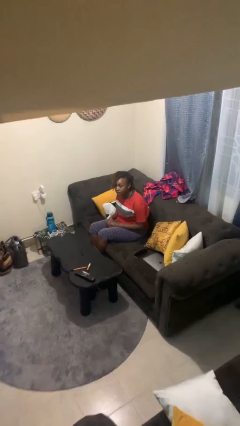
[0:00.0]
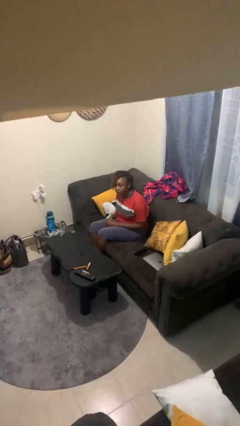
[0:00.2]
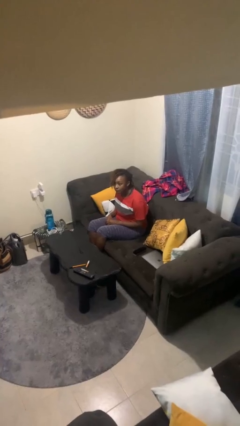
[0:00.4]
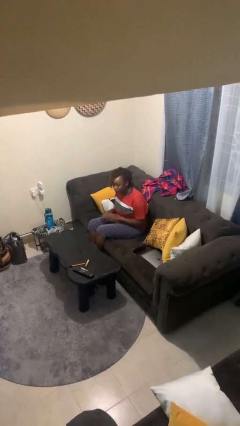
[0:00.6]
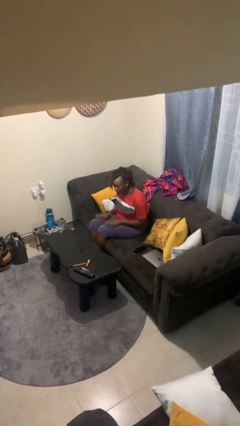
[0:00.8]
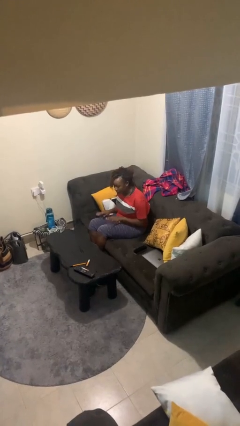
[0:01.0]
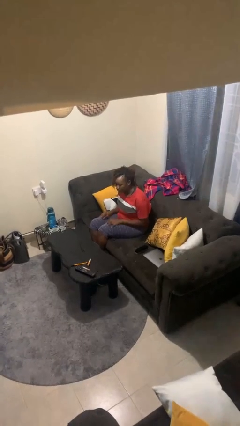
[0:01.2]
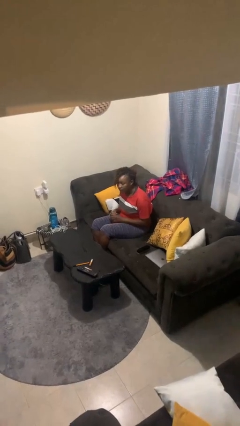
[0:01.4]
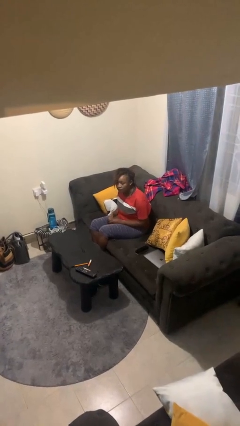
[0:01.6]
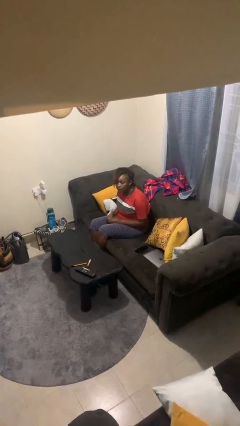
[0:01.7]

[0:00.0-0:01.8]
person slaps hands on thighs

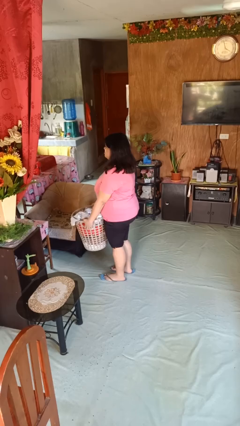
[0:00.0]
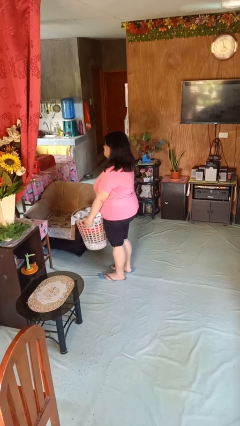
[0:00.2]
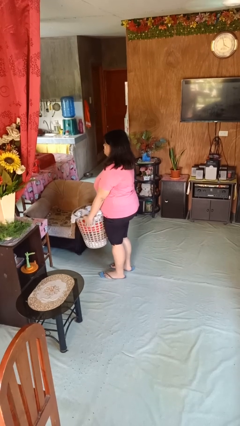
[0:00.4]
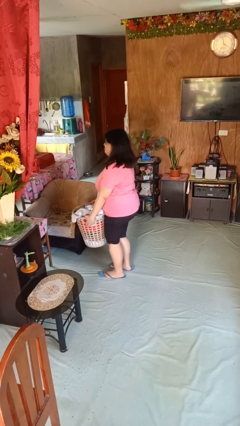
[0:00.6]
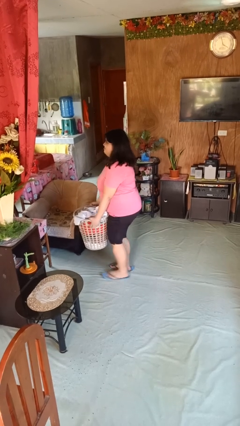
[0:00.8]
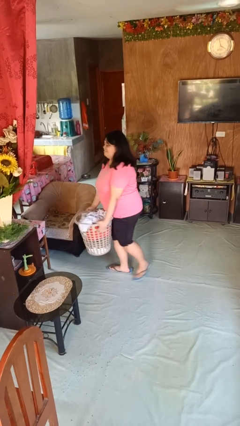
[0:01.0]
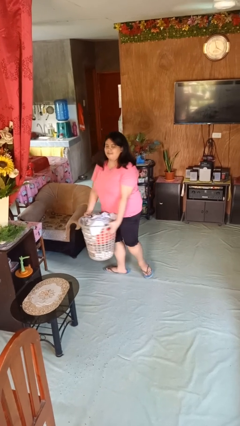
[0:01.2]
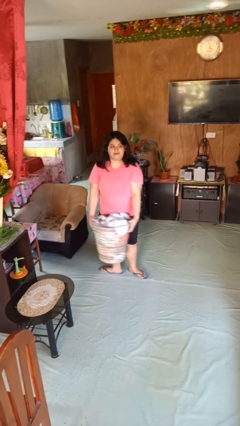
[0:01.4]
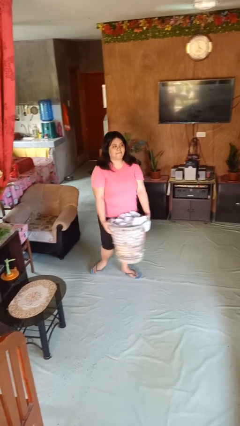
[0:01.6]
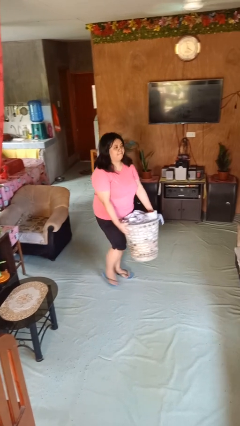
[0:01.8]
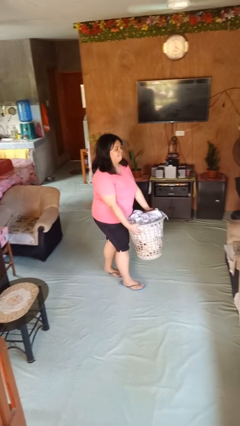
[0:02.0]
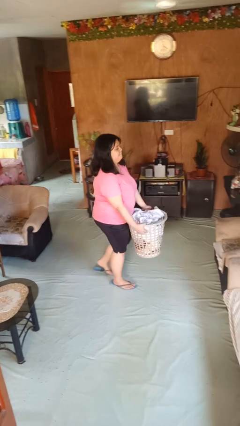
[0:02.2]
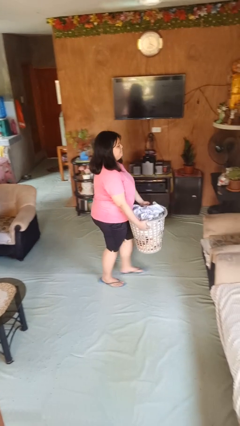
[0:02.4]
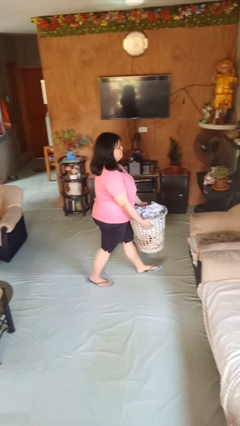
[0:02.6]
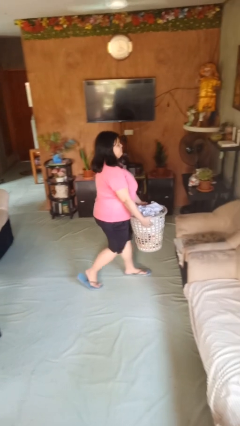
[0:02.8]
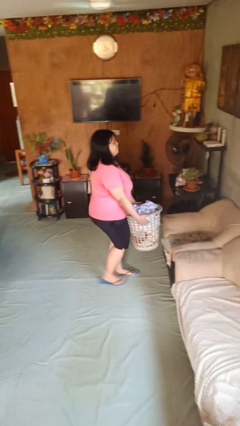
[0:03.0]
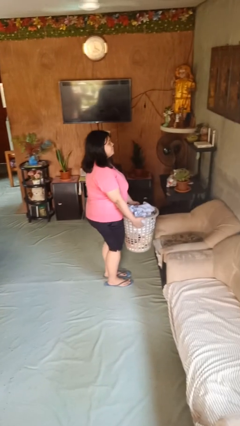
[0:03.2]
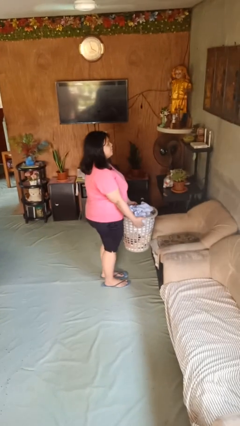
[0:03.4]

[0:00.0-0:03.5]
person carries laundry basket

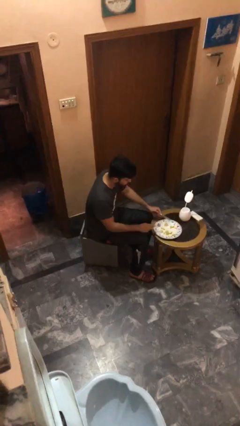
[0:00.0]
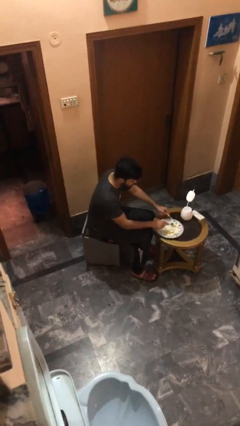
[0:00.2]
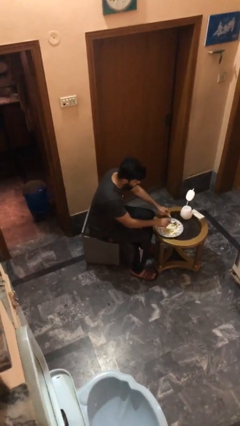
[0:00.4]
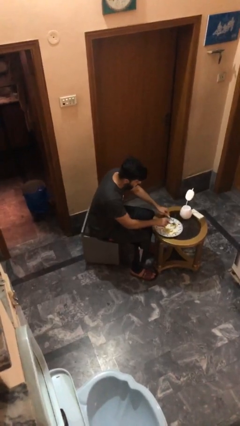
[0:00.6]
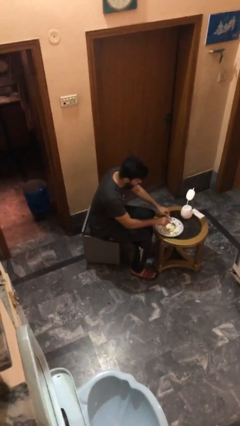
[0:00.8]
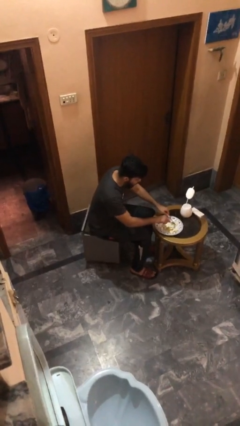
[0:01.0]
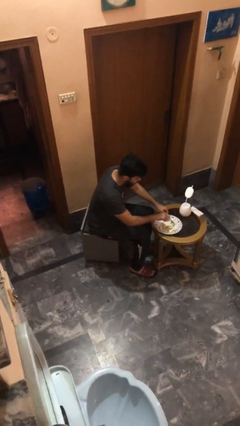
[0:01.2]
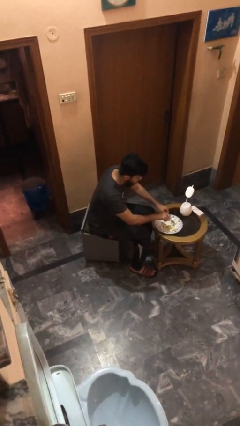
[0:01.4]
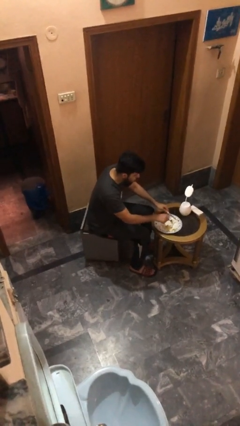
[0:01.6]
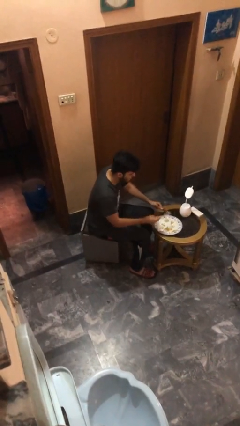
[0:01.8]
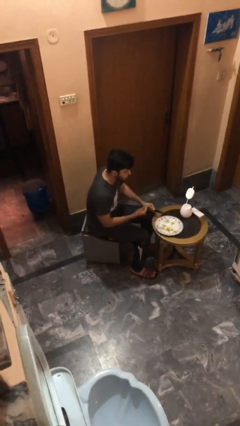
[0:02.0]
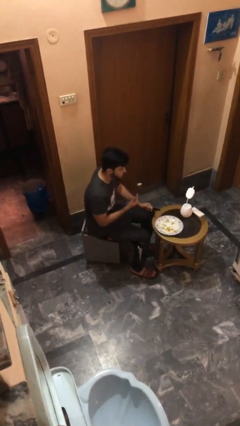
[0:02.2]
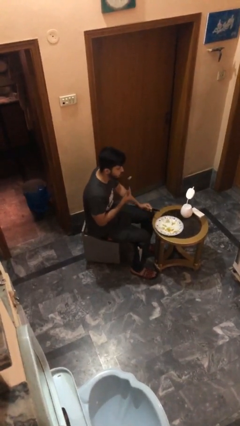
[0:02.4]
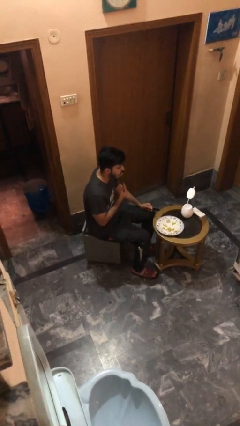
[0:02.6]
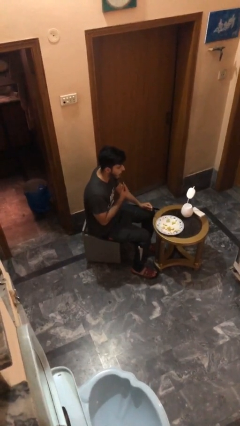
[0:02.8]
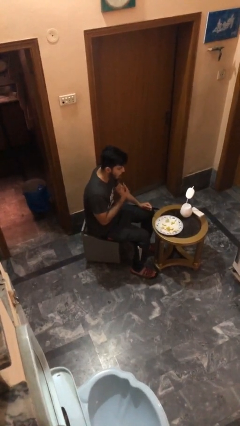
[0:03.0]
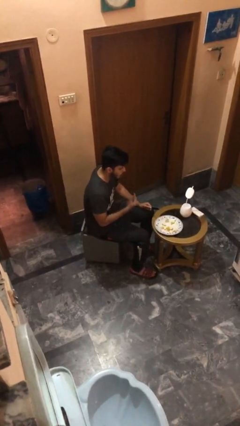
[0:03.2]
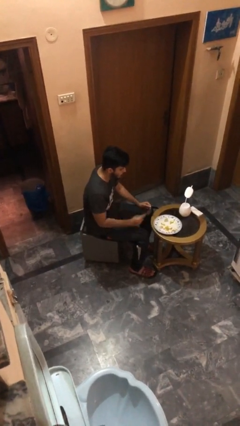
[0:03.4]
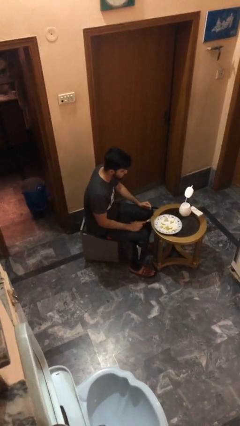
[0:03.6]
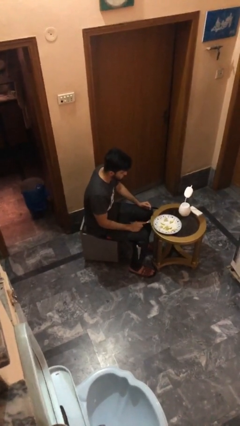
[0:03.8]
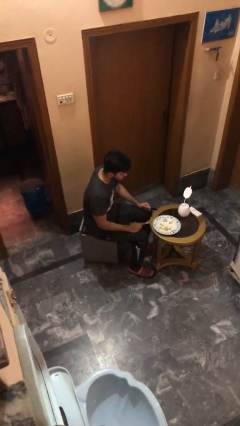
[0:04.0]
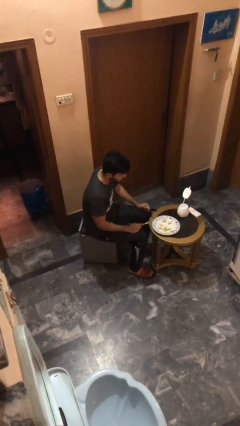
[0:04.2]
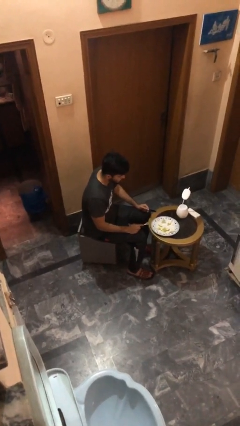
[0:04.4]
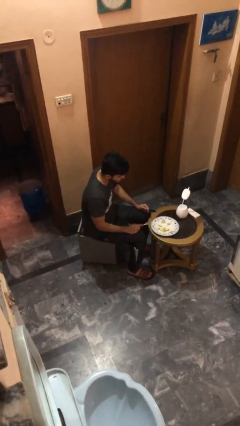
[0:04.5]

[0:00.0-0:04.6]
person eats with utensil

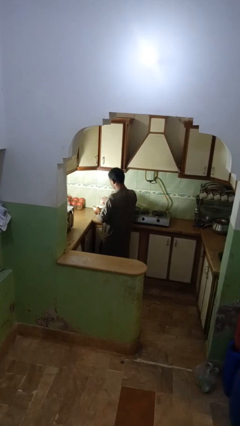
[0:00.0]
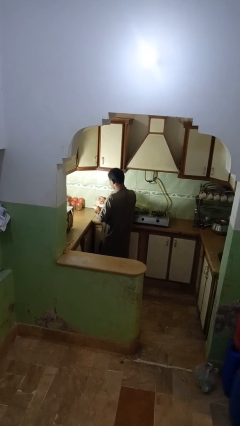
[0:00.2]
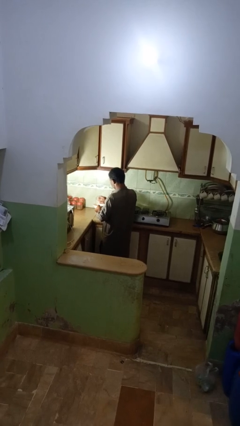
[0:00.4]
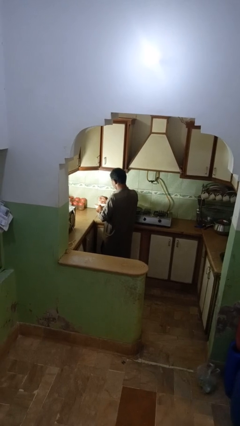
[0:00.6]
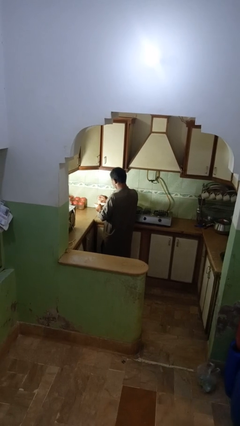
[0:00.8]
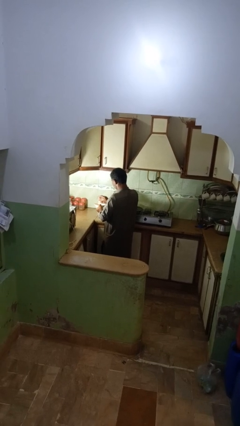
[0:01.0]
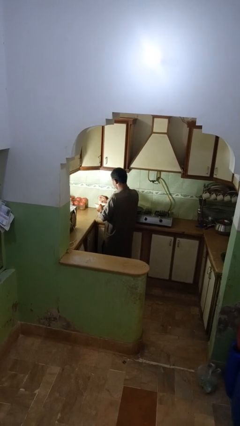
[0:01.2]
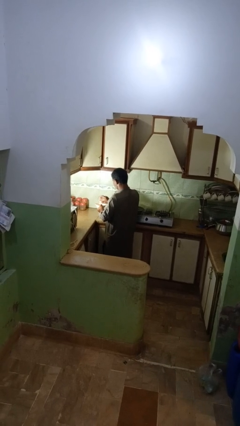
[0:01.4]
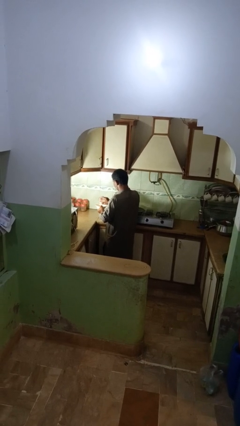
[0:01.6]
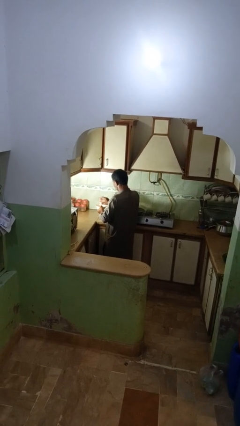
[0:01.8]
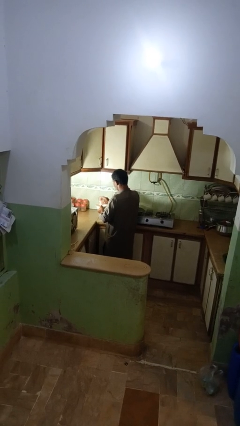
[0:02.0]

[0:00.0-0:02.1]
person pours into bowl

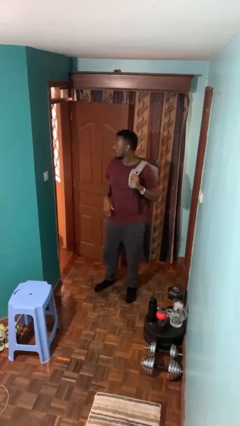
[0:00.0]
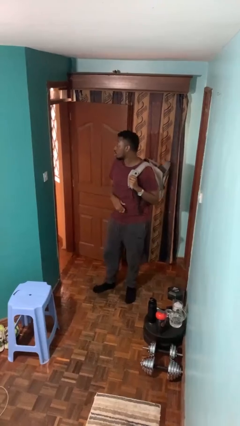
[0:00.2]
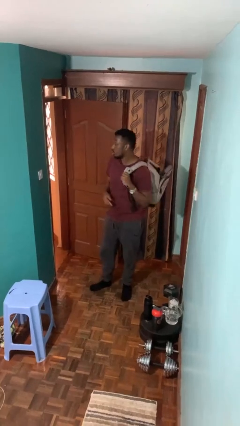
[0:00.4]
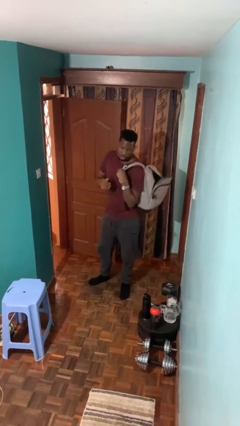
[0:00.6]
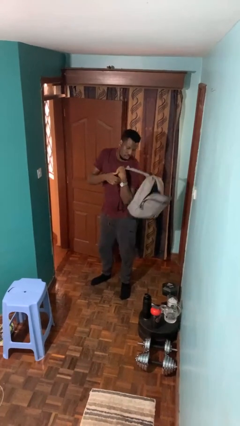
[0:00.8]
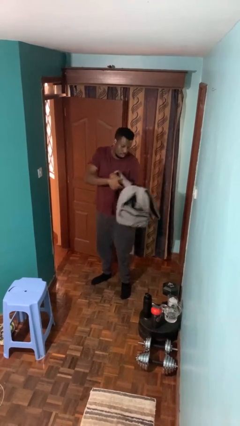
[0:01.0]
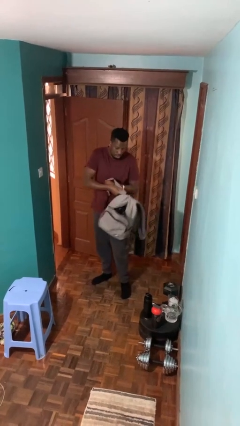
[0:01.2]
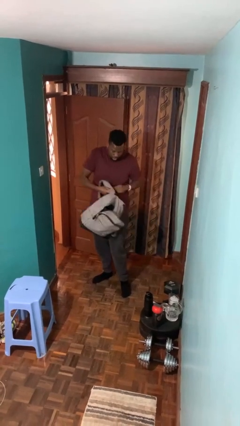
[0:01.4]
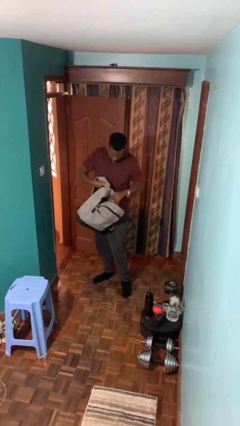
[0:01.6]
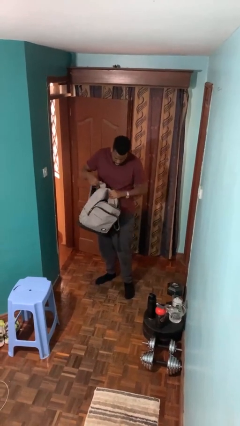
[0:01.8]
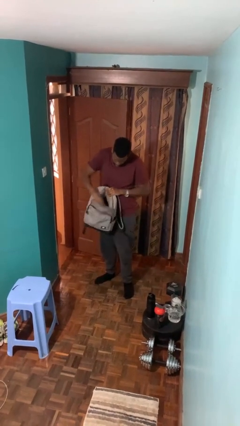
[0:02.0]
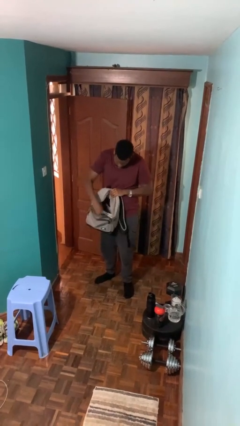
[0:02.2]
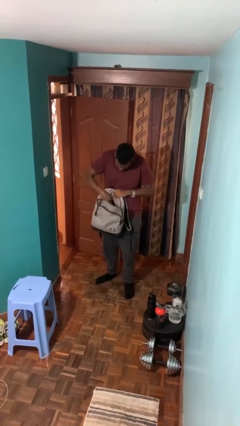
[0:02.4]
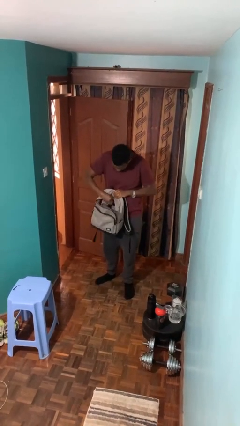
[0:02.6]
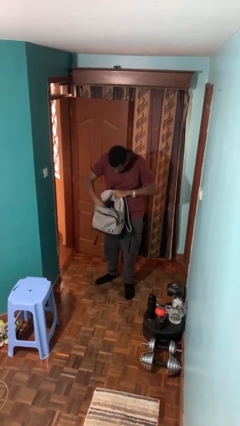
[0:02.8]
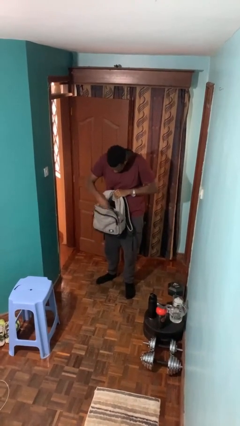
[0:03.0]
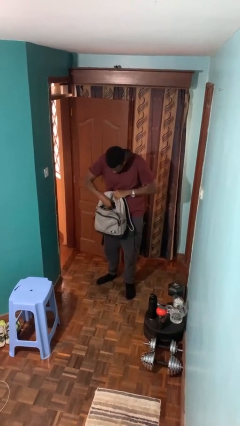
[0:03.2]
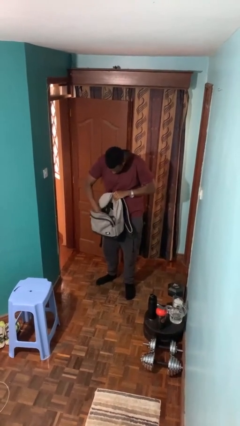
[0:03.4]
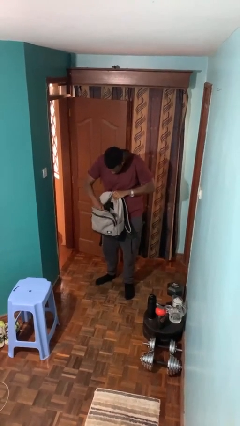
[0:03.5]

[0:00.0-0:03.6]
person searches in backpack

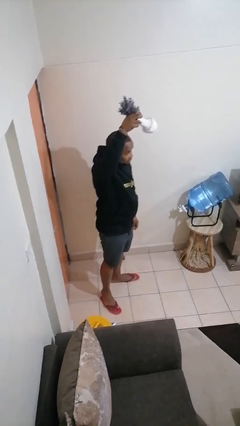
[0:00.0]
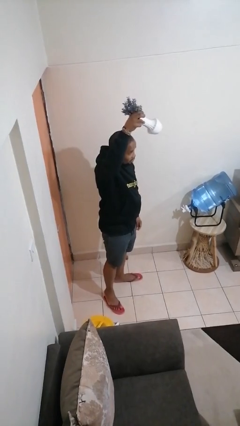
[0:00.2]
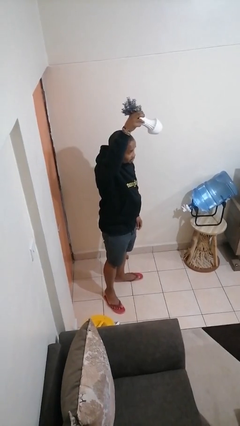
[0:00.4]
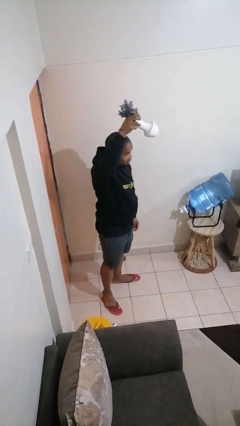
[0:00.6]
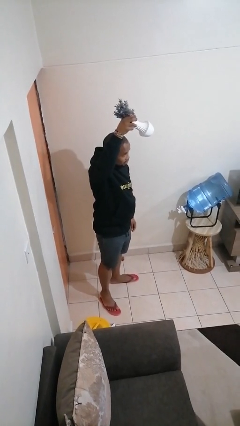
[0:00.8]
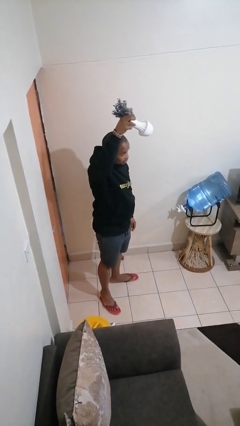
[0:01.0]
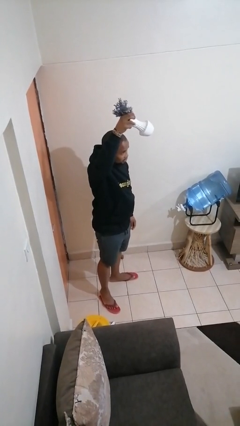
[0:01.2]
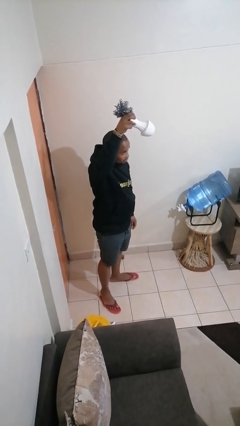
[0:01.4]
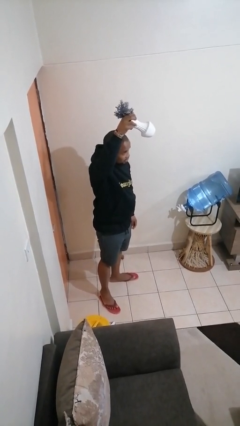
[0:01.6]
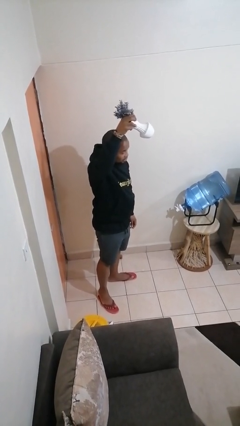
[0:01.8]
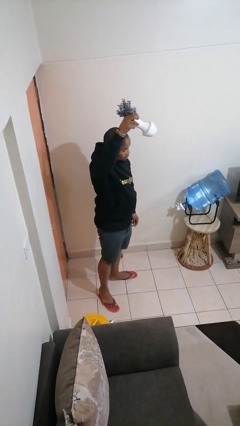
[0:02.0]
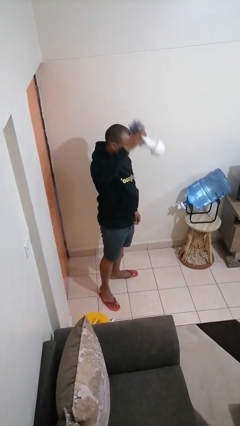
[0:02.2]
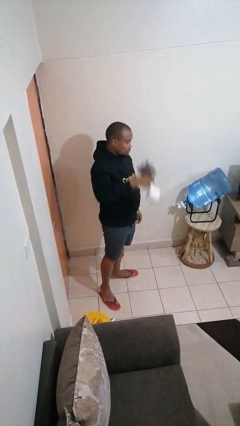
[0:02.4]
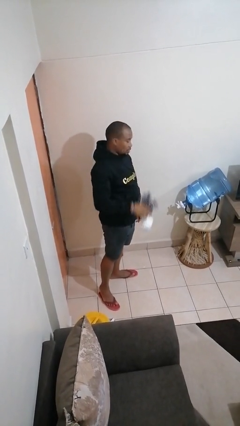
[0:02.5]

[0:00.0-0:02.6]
person holds object above head
